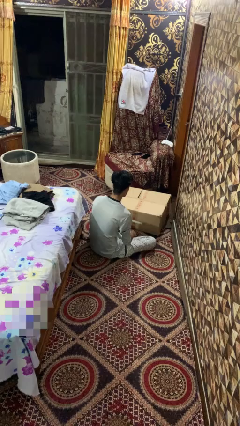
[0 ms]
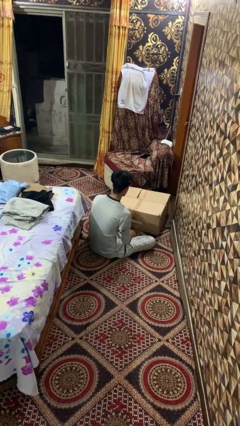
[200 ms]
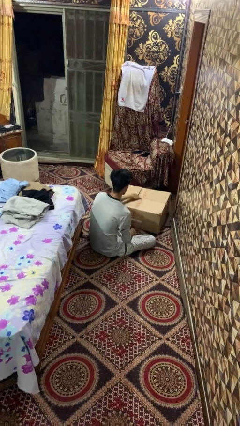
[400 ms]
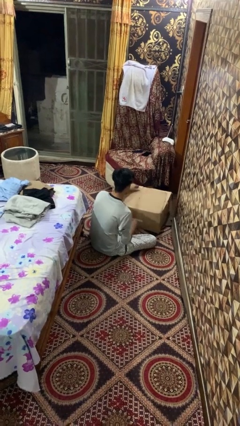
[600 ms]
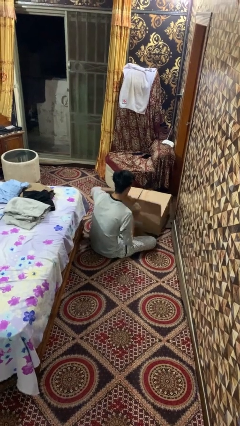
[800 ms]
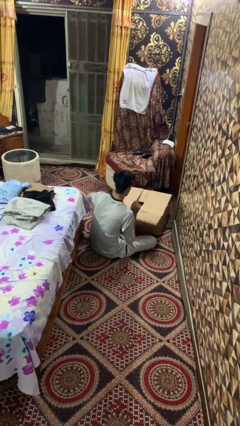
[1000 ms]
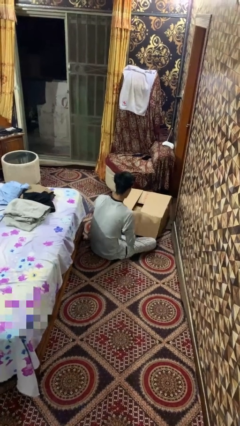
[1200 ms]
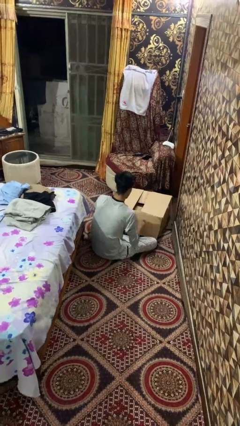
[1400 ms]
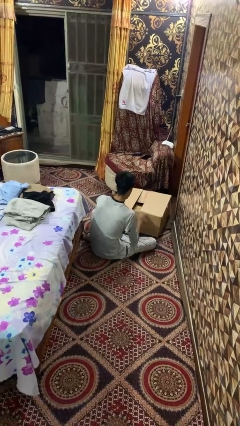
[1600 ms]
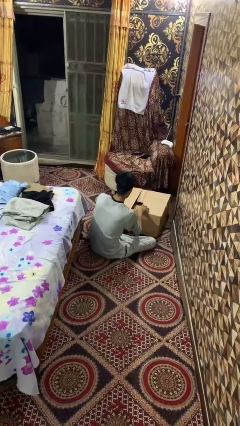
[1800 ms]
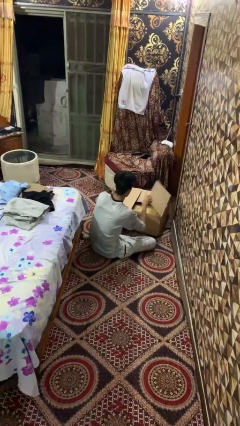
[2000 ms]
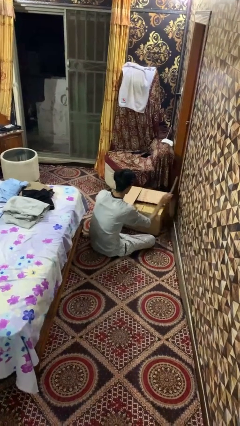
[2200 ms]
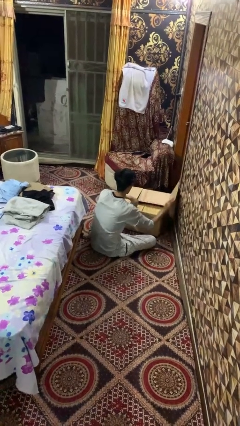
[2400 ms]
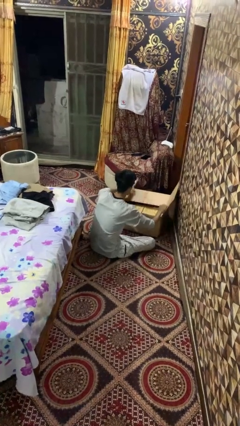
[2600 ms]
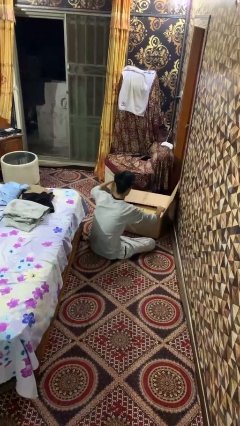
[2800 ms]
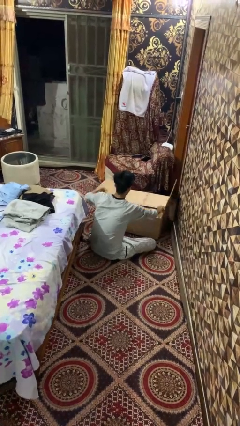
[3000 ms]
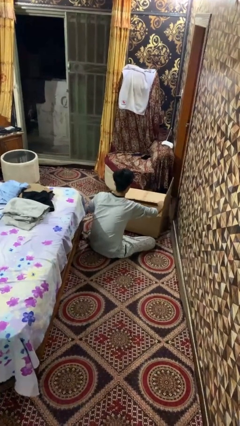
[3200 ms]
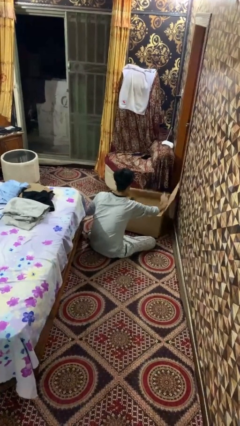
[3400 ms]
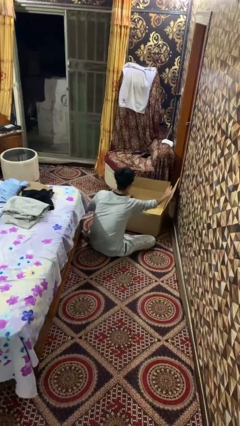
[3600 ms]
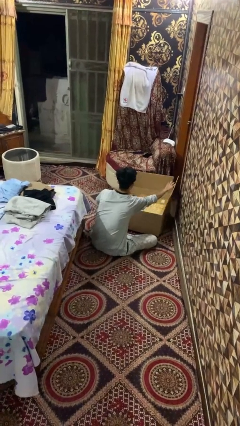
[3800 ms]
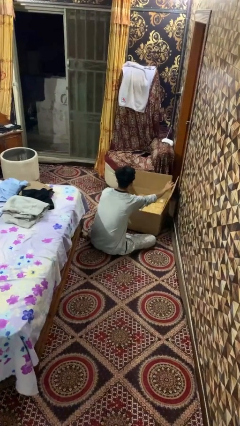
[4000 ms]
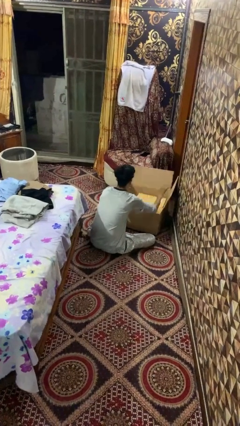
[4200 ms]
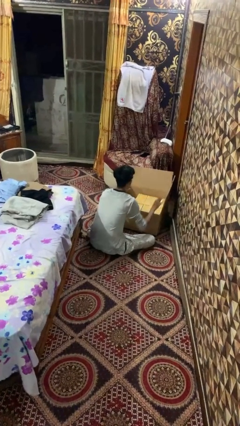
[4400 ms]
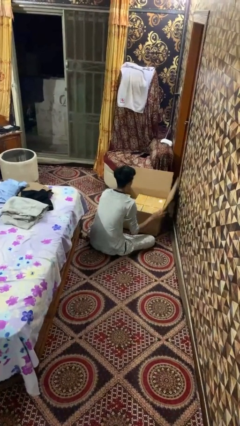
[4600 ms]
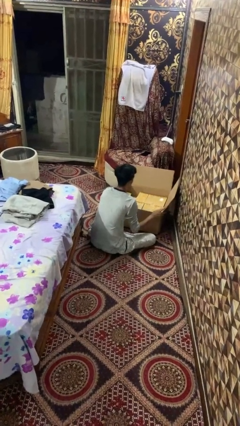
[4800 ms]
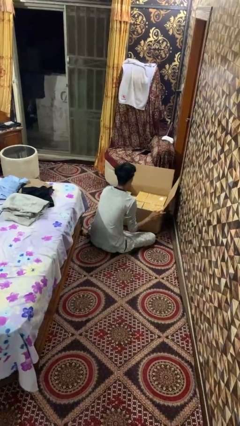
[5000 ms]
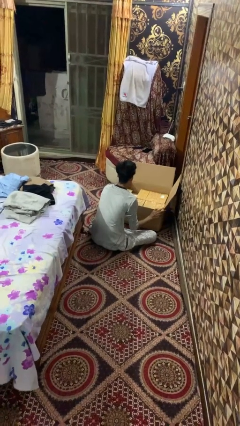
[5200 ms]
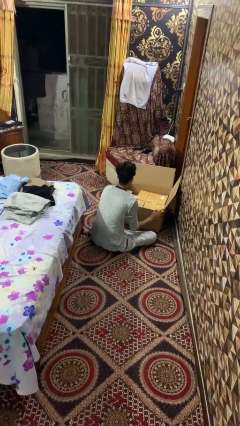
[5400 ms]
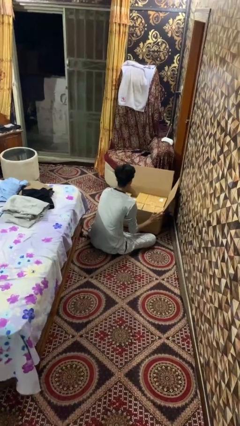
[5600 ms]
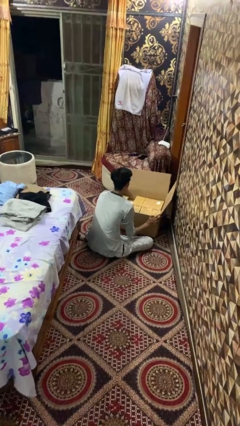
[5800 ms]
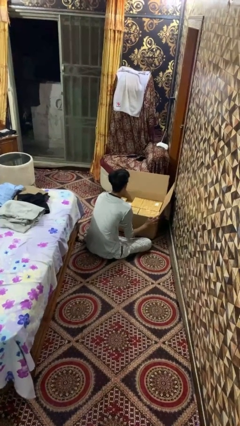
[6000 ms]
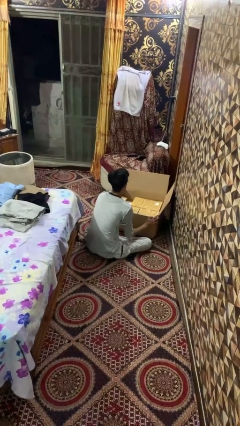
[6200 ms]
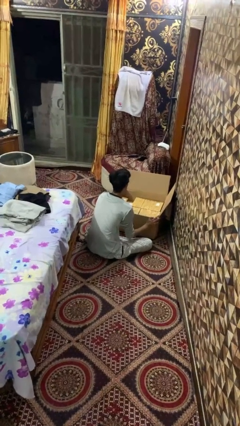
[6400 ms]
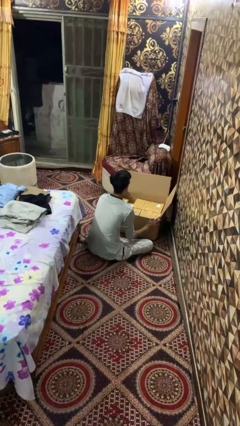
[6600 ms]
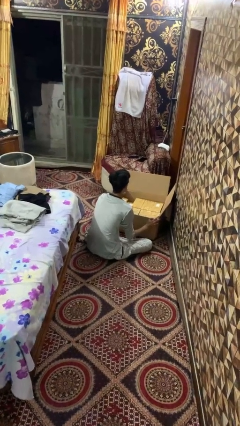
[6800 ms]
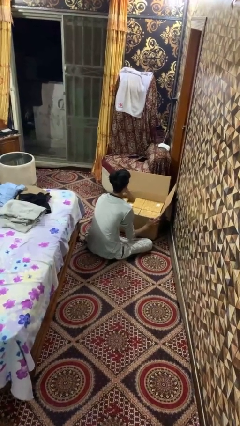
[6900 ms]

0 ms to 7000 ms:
person opens box

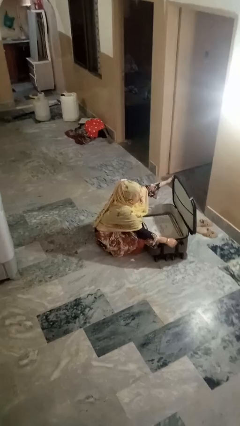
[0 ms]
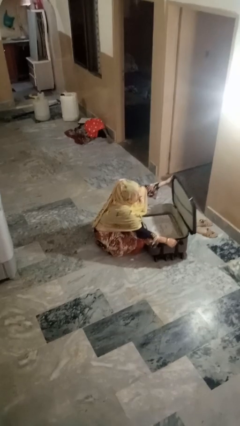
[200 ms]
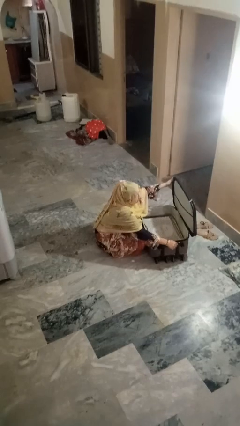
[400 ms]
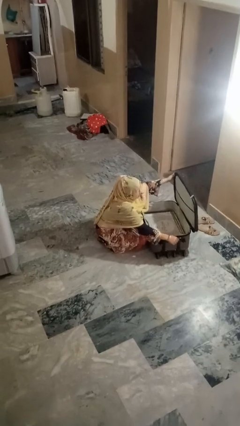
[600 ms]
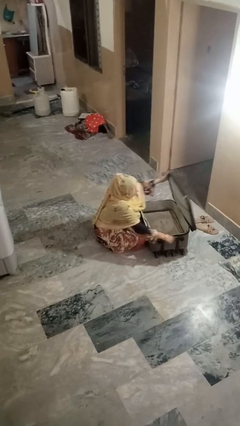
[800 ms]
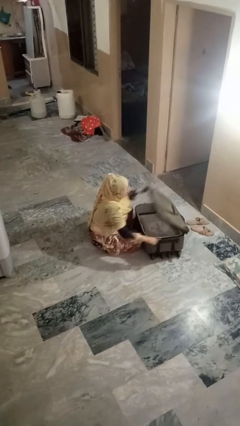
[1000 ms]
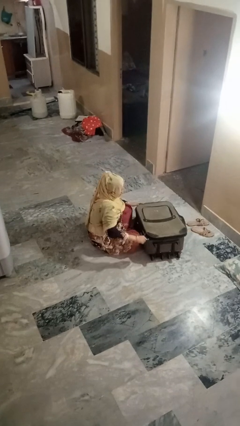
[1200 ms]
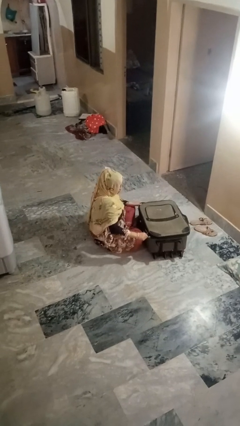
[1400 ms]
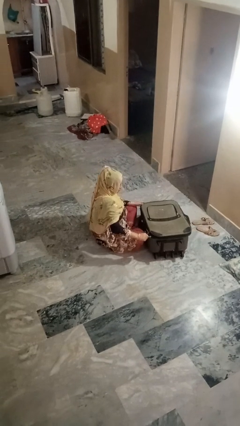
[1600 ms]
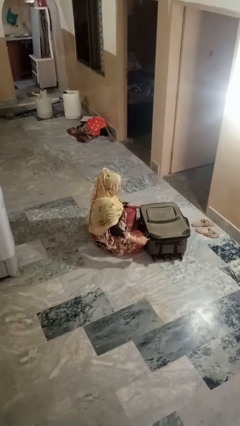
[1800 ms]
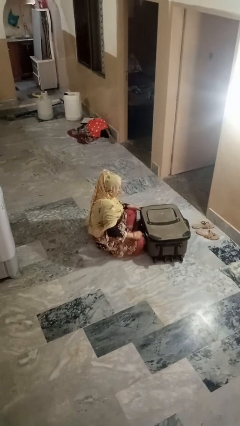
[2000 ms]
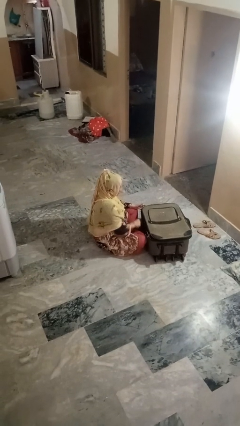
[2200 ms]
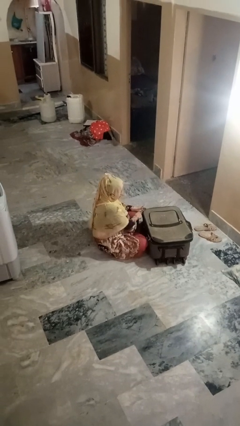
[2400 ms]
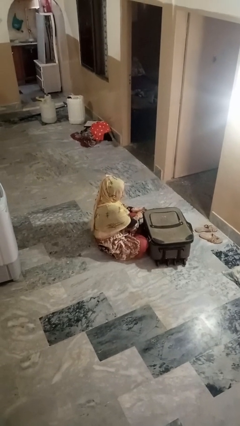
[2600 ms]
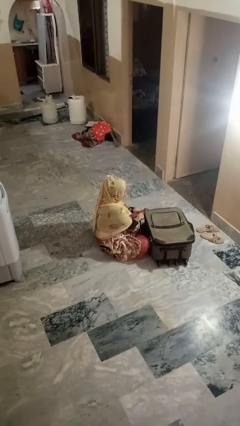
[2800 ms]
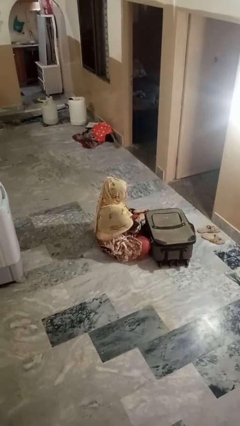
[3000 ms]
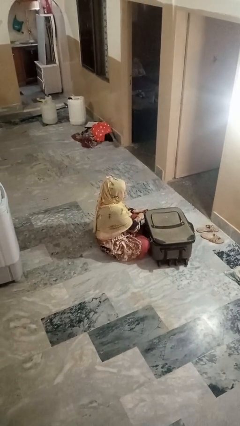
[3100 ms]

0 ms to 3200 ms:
person closes suitcase

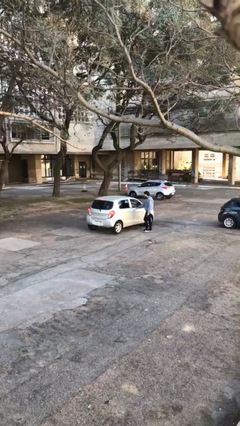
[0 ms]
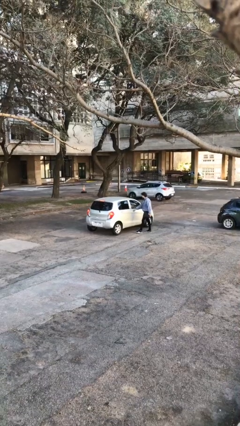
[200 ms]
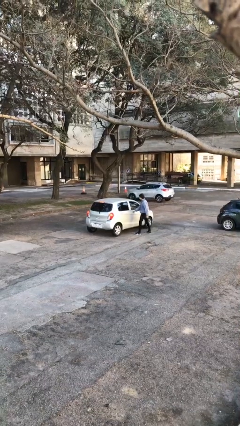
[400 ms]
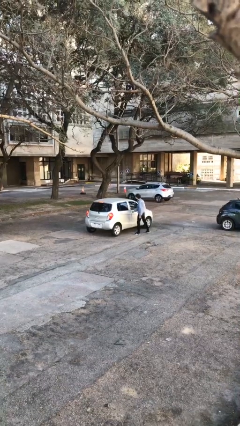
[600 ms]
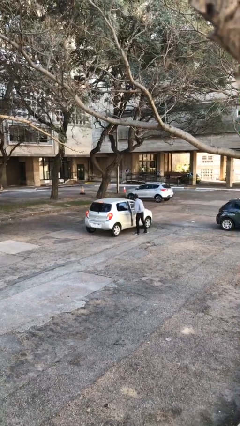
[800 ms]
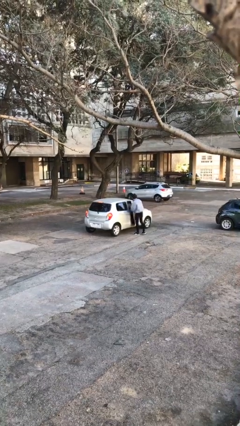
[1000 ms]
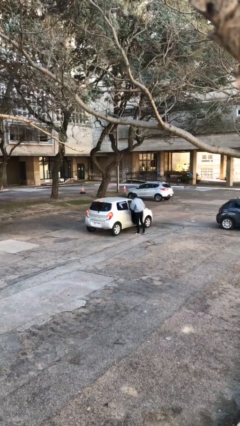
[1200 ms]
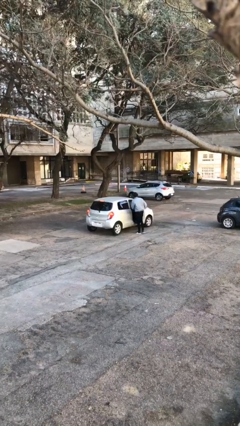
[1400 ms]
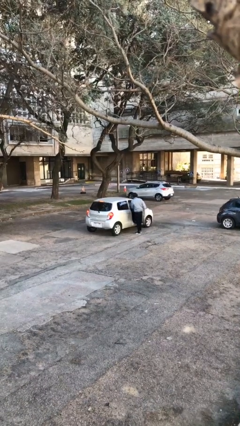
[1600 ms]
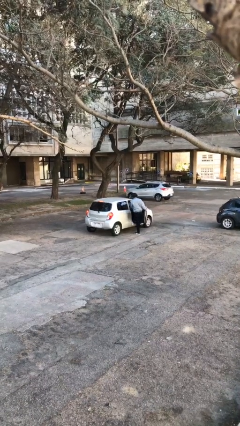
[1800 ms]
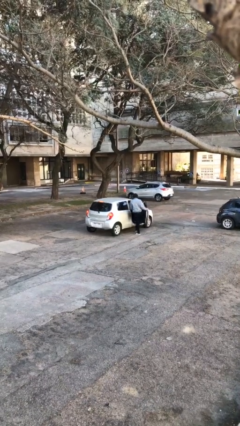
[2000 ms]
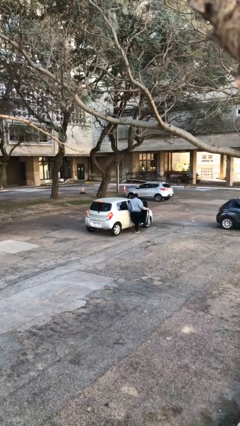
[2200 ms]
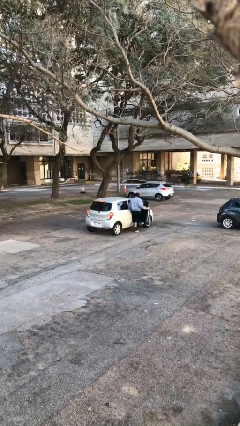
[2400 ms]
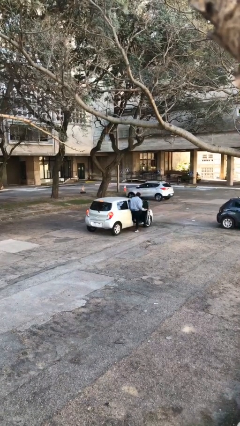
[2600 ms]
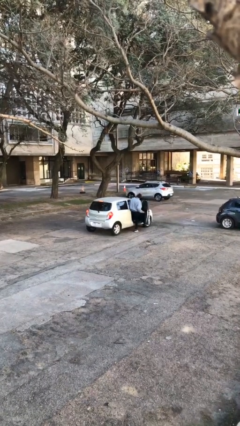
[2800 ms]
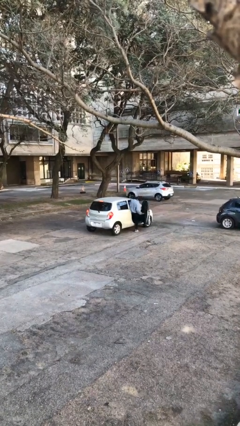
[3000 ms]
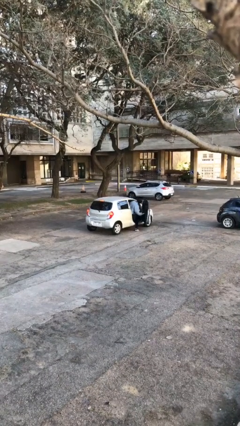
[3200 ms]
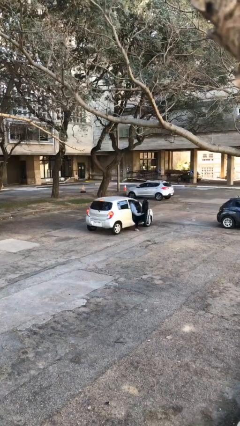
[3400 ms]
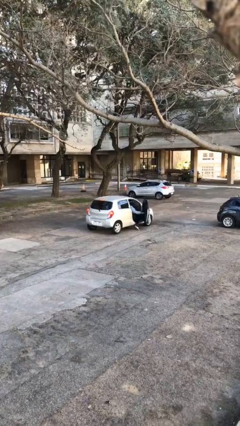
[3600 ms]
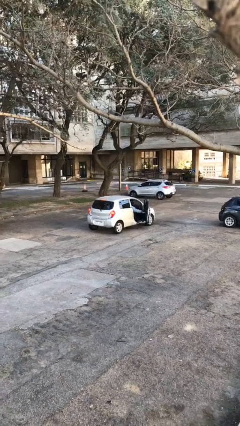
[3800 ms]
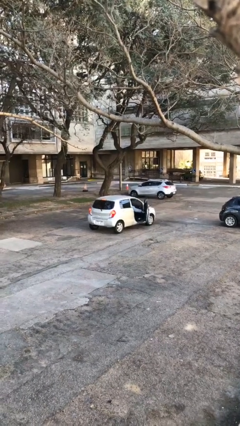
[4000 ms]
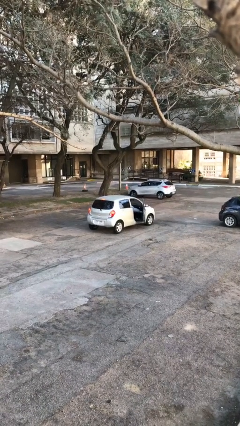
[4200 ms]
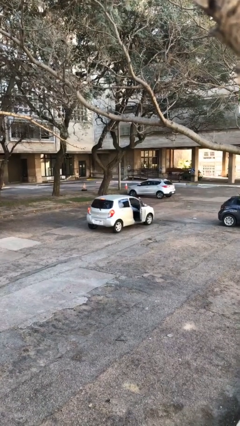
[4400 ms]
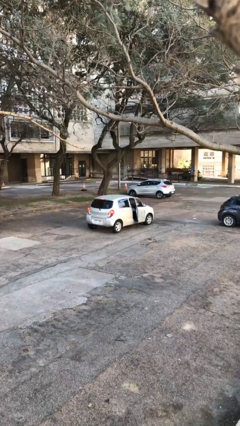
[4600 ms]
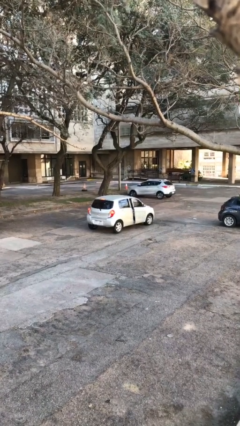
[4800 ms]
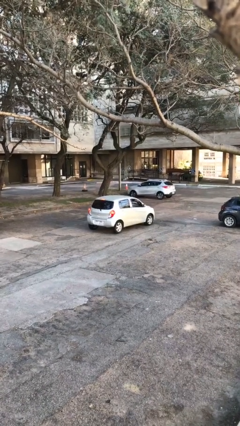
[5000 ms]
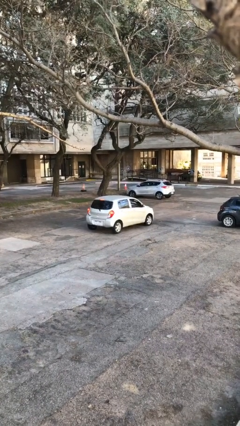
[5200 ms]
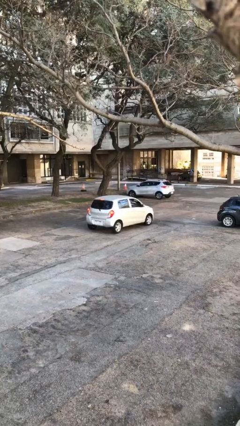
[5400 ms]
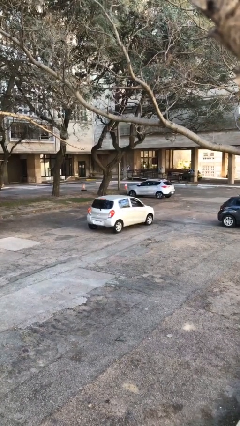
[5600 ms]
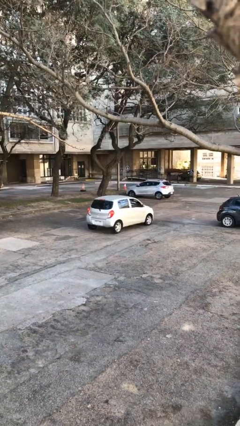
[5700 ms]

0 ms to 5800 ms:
car picks up person

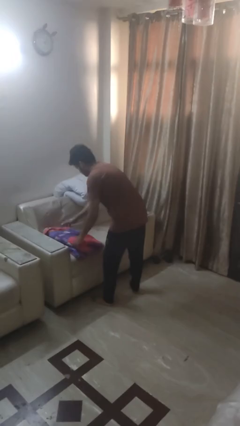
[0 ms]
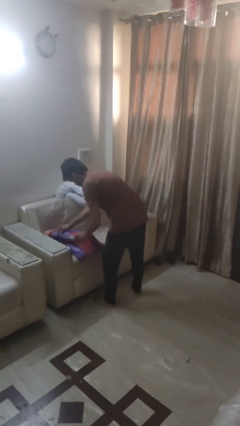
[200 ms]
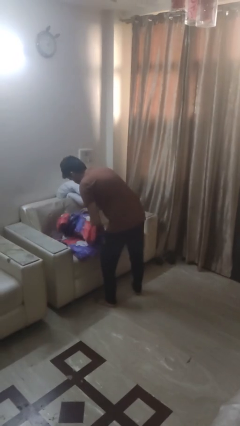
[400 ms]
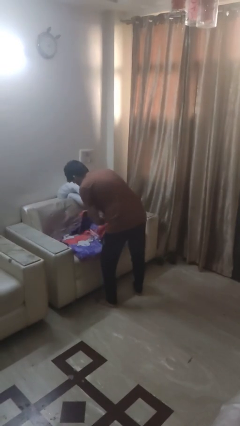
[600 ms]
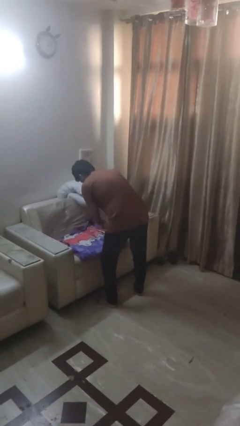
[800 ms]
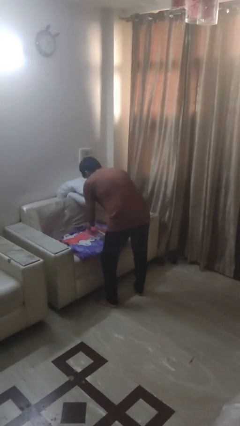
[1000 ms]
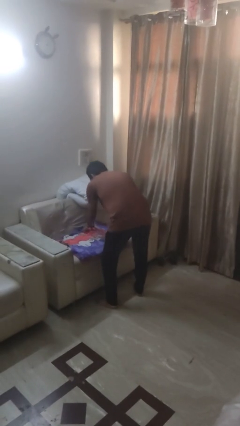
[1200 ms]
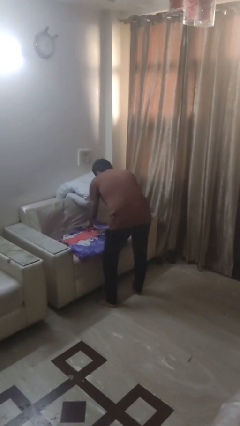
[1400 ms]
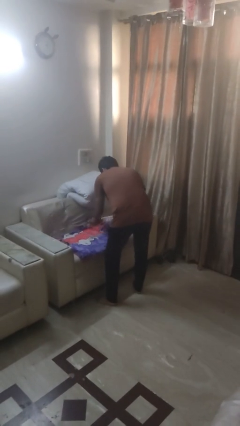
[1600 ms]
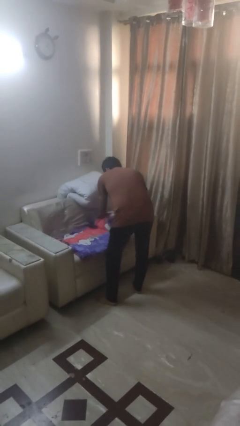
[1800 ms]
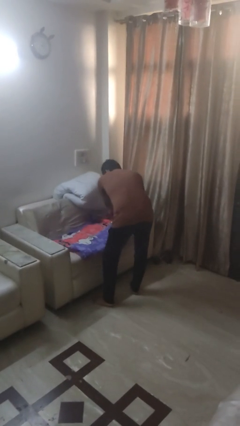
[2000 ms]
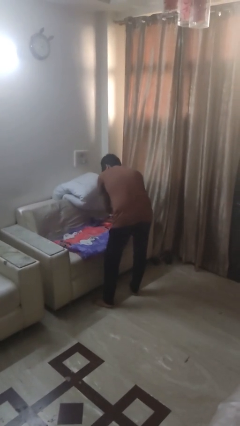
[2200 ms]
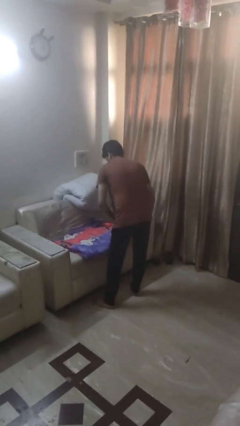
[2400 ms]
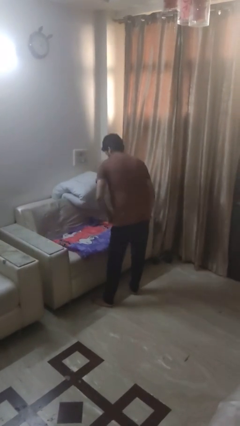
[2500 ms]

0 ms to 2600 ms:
person unfolds blanket
